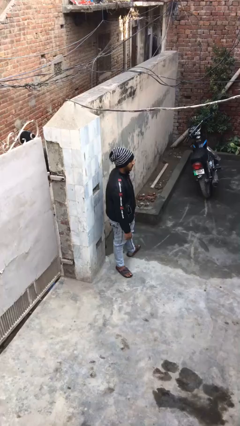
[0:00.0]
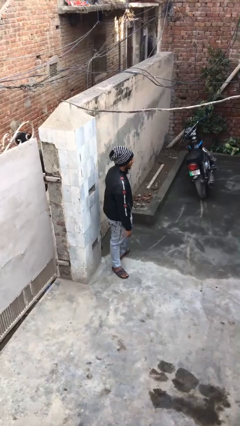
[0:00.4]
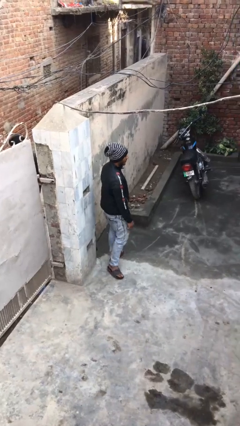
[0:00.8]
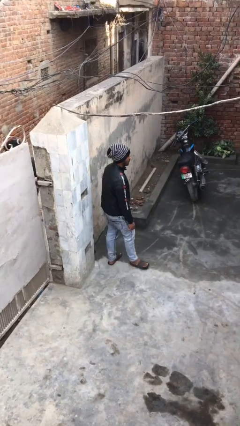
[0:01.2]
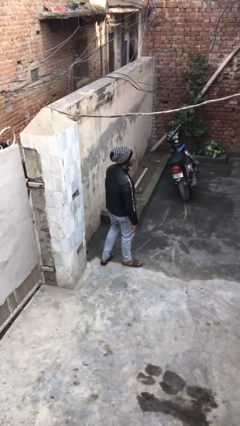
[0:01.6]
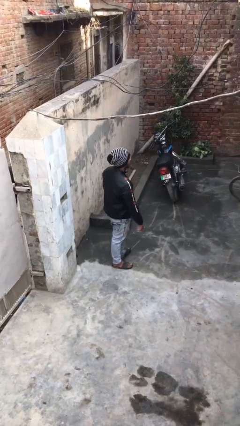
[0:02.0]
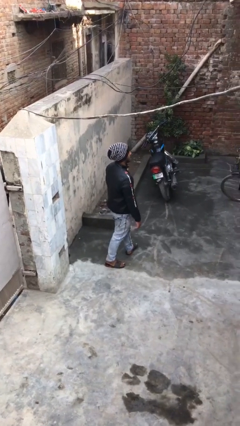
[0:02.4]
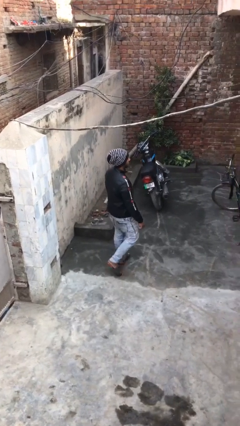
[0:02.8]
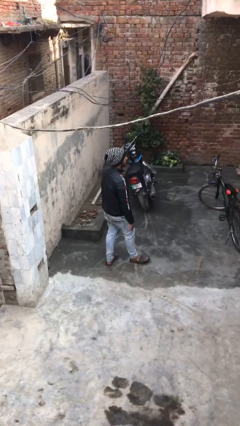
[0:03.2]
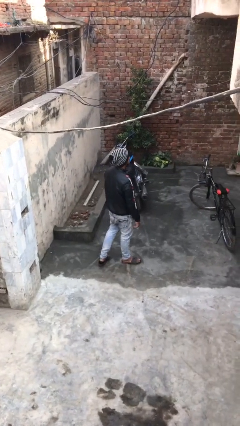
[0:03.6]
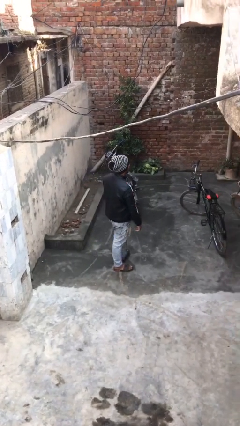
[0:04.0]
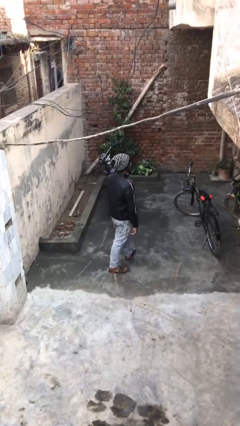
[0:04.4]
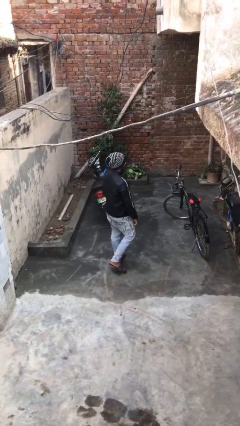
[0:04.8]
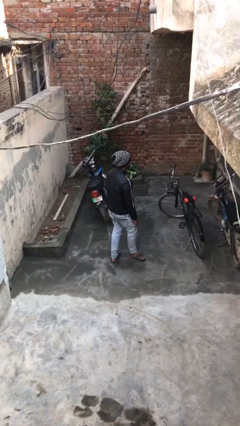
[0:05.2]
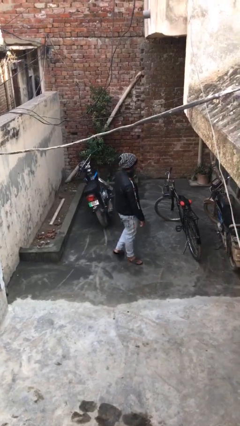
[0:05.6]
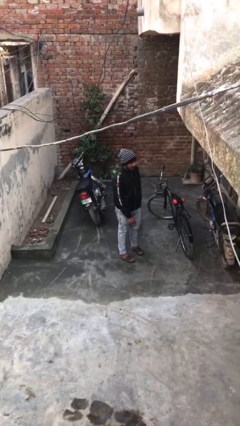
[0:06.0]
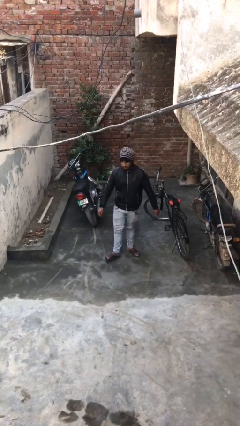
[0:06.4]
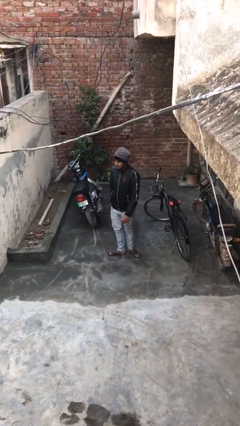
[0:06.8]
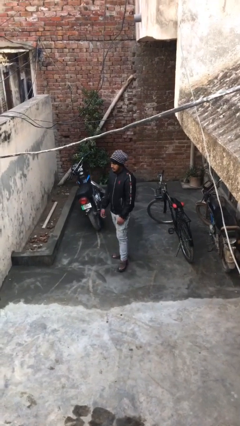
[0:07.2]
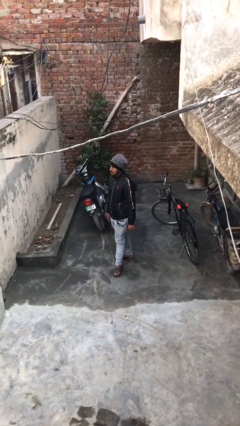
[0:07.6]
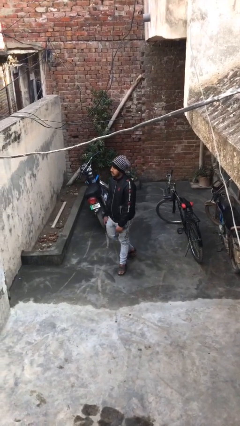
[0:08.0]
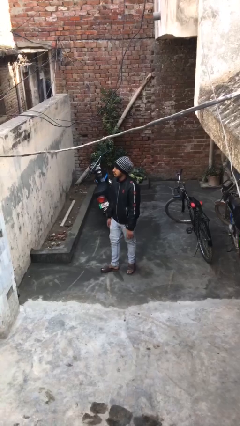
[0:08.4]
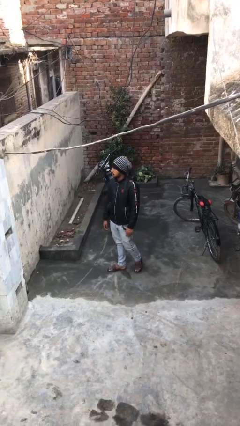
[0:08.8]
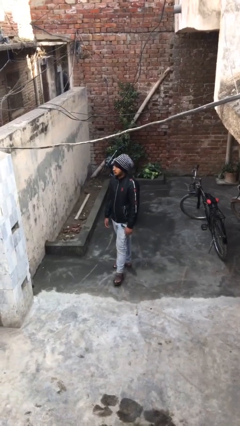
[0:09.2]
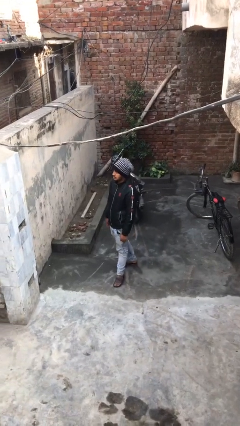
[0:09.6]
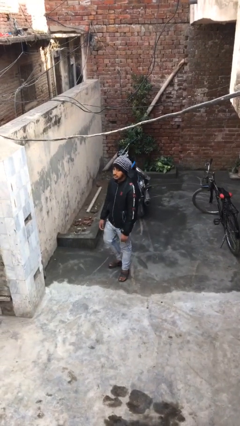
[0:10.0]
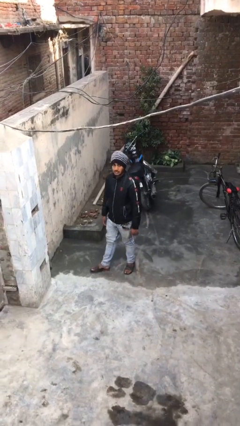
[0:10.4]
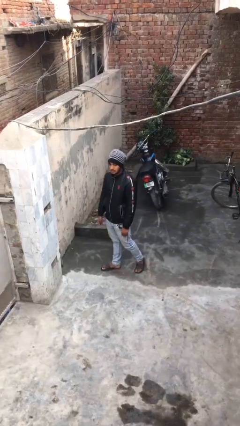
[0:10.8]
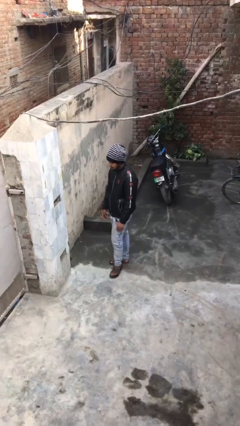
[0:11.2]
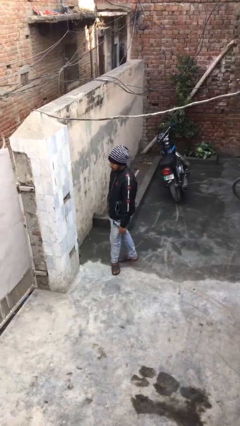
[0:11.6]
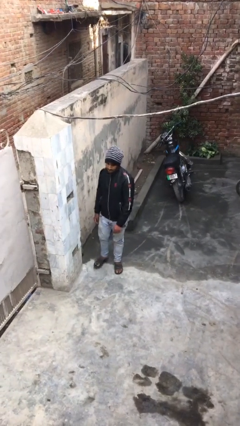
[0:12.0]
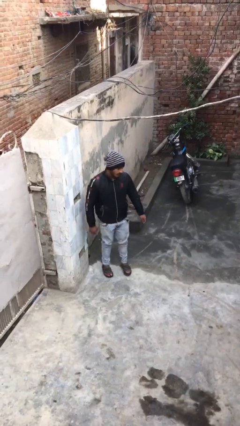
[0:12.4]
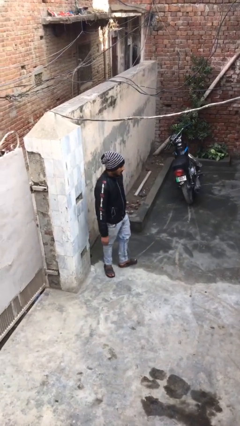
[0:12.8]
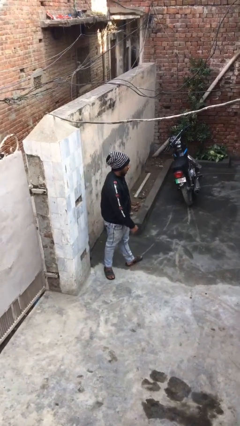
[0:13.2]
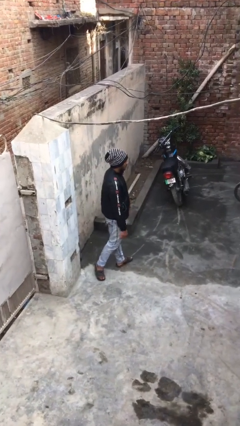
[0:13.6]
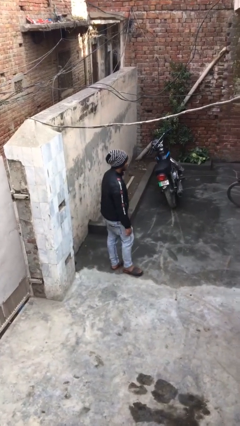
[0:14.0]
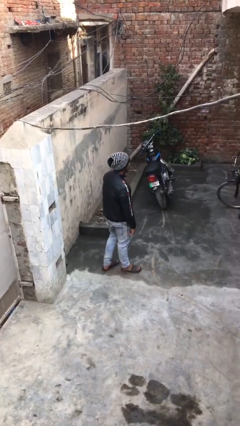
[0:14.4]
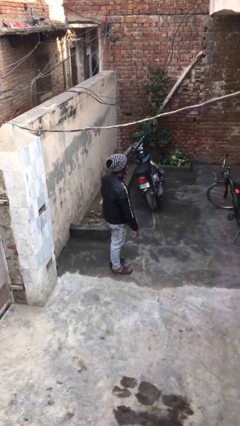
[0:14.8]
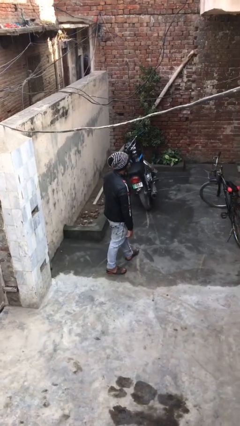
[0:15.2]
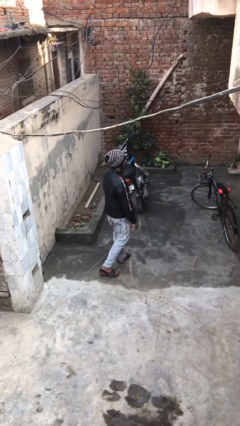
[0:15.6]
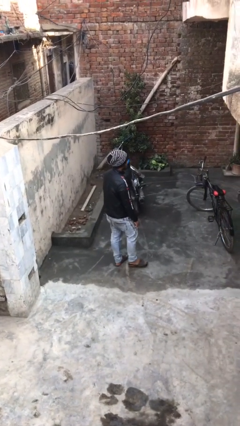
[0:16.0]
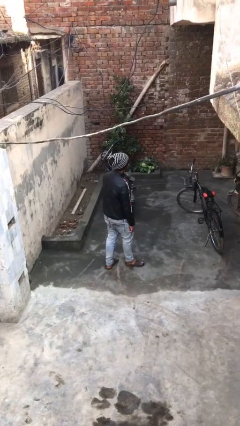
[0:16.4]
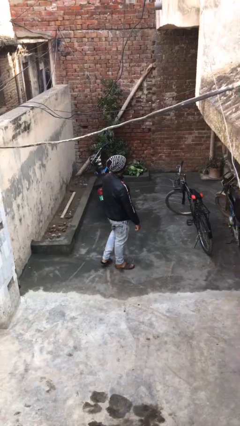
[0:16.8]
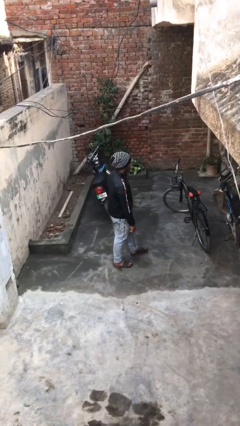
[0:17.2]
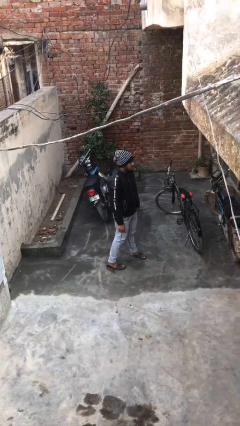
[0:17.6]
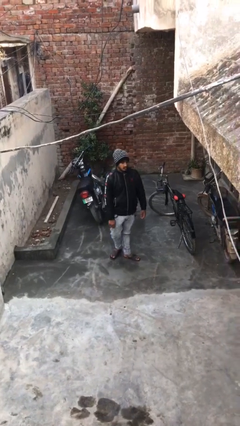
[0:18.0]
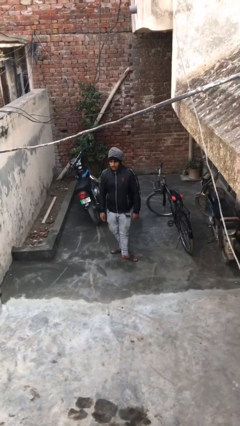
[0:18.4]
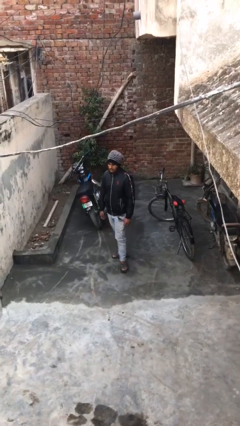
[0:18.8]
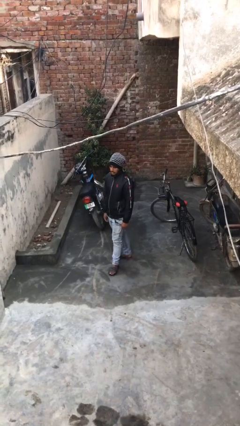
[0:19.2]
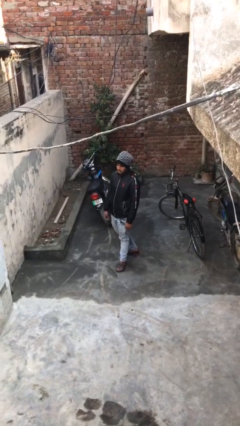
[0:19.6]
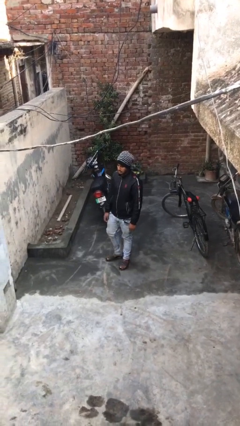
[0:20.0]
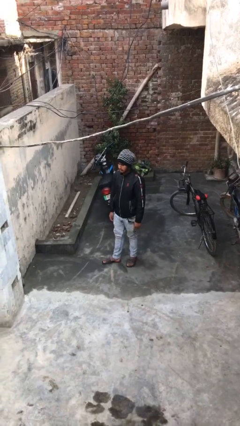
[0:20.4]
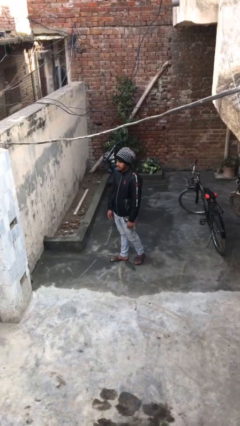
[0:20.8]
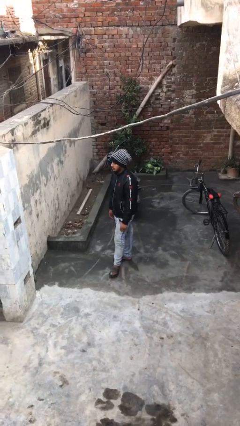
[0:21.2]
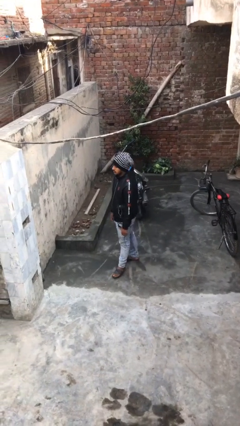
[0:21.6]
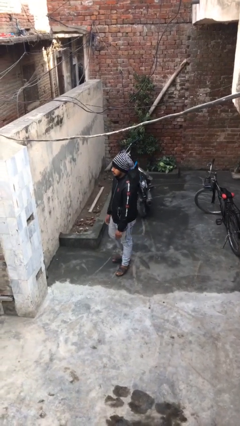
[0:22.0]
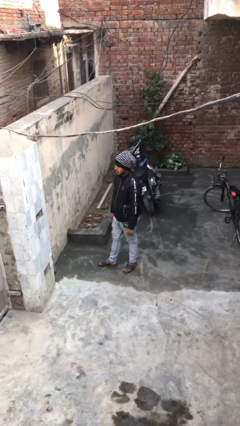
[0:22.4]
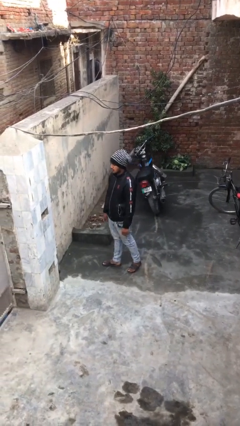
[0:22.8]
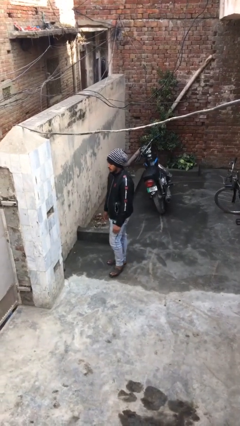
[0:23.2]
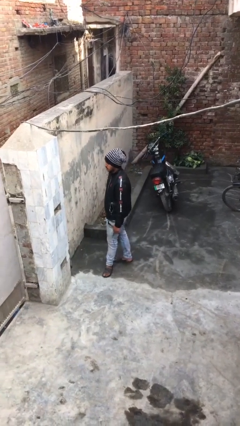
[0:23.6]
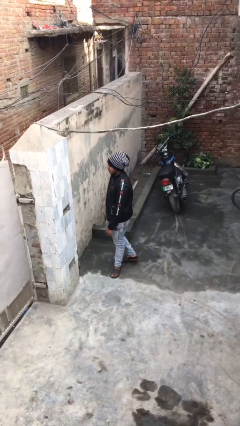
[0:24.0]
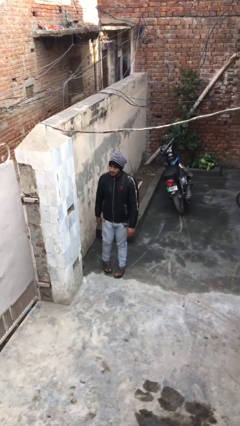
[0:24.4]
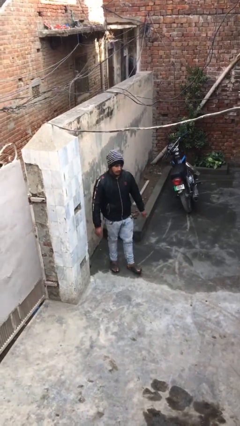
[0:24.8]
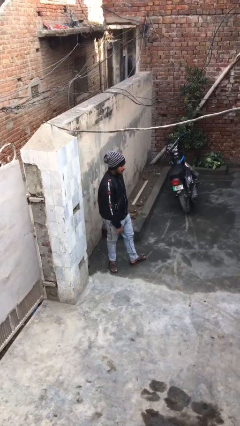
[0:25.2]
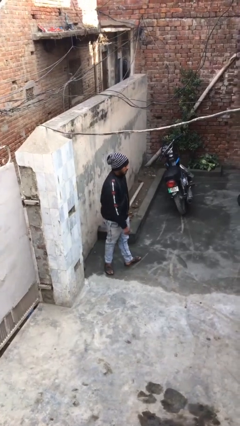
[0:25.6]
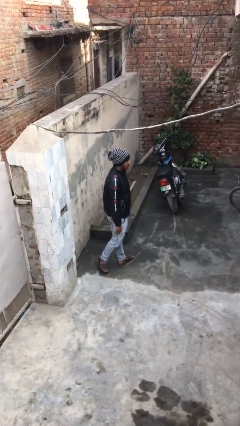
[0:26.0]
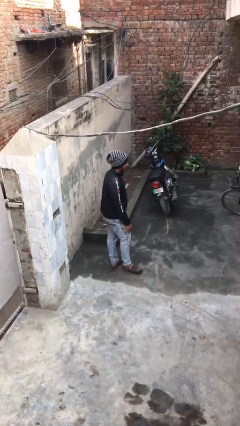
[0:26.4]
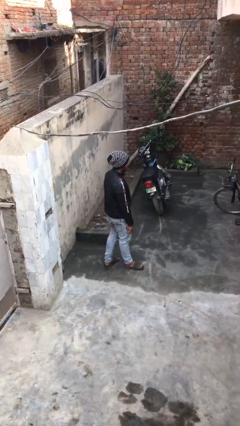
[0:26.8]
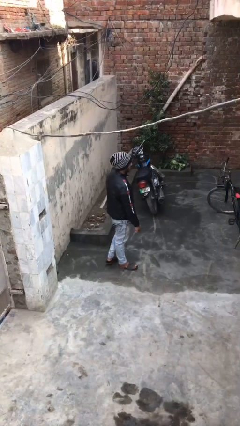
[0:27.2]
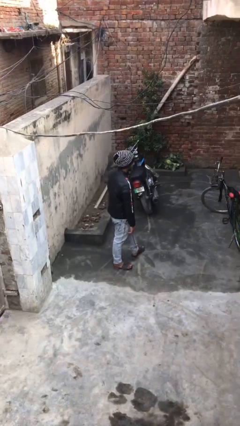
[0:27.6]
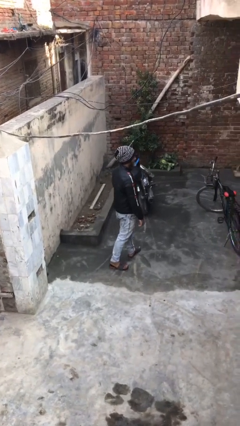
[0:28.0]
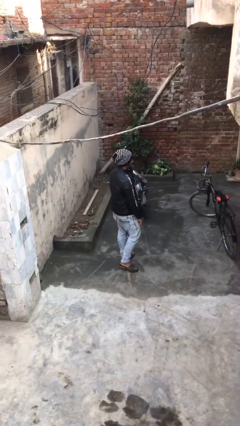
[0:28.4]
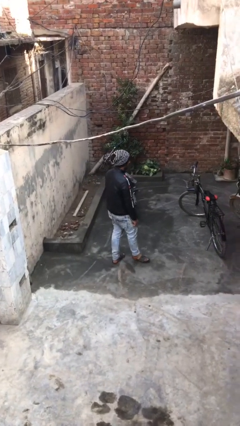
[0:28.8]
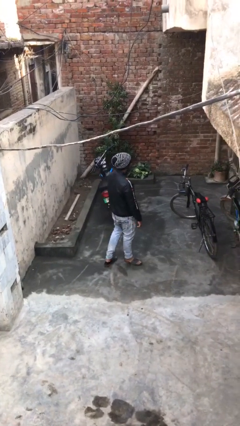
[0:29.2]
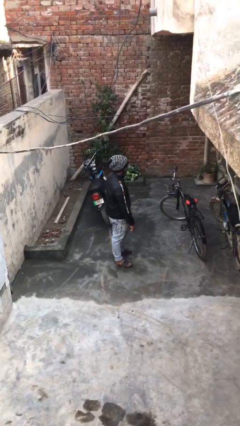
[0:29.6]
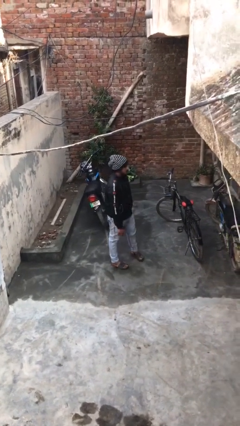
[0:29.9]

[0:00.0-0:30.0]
person walks

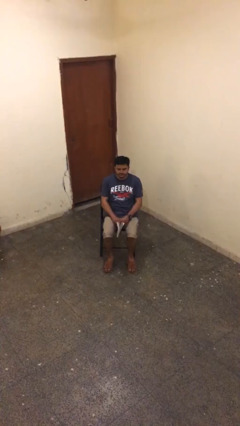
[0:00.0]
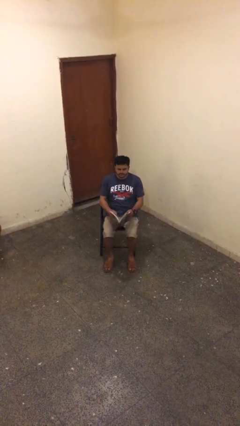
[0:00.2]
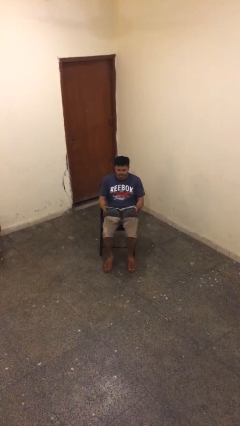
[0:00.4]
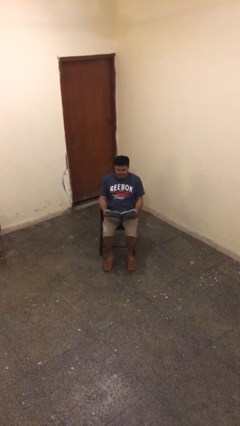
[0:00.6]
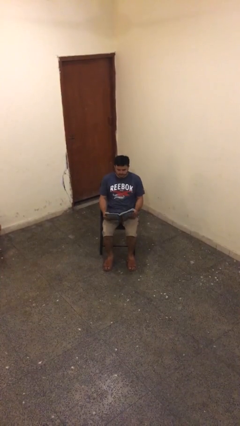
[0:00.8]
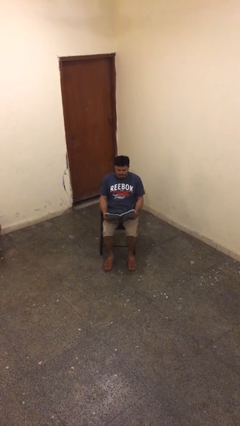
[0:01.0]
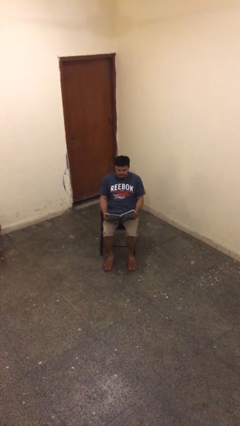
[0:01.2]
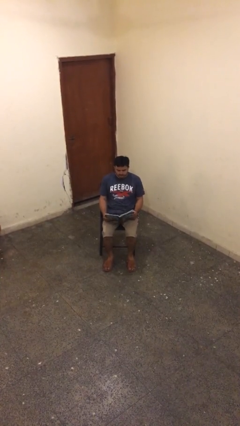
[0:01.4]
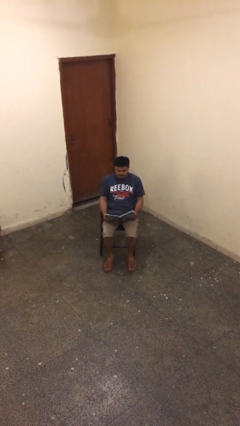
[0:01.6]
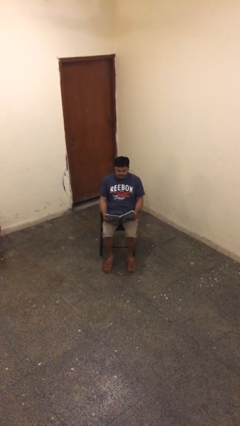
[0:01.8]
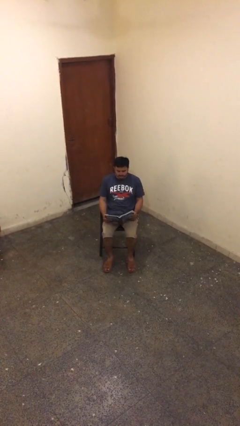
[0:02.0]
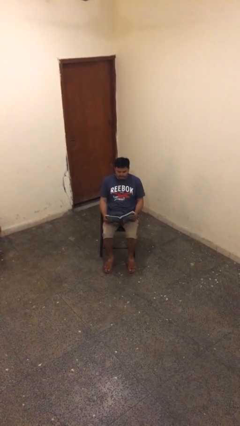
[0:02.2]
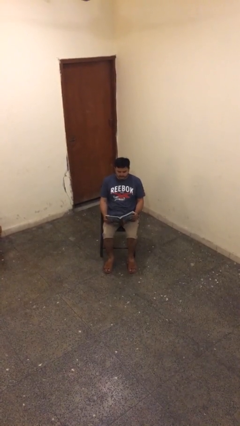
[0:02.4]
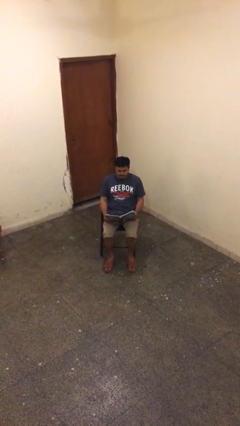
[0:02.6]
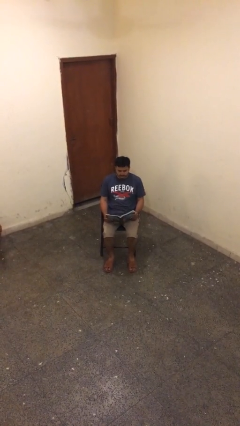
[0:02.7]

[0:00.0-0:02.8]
person reads document

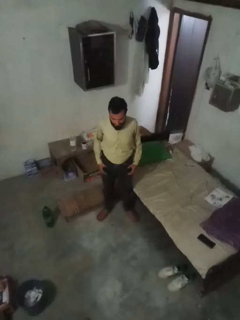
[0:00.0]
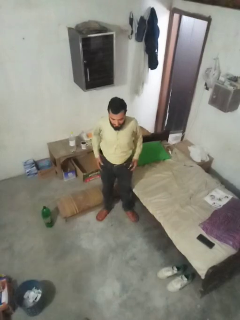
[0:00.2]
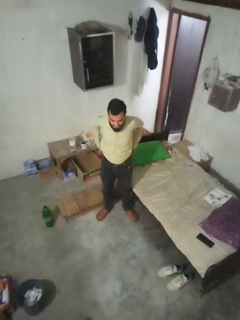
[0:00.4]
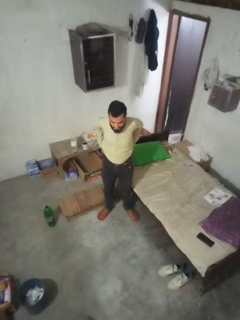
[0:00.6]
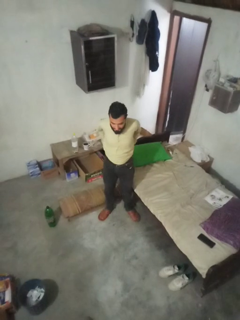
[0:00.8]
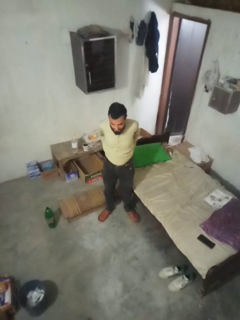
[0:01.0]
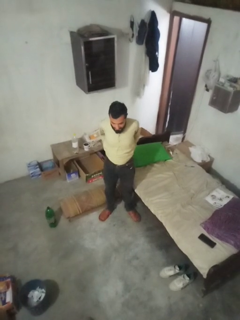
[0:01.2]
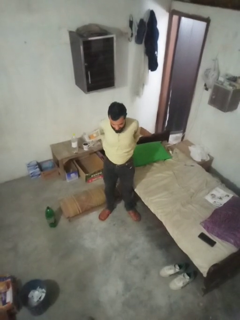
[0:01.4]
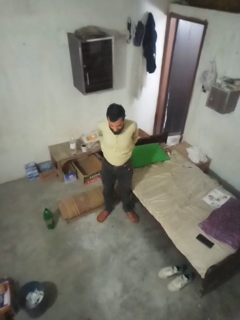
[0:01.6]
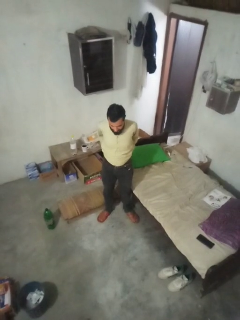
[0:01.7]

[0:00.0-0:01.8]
person puts hands in back pockets
